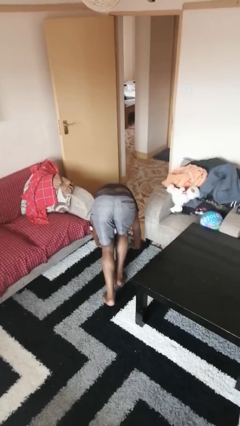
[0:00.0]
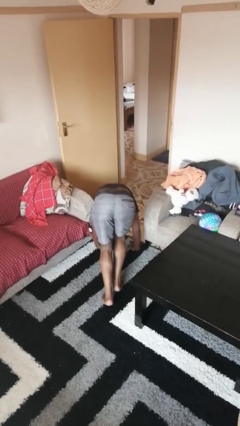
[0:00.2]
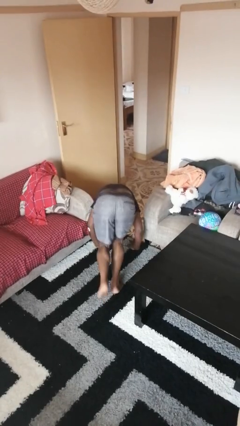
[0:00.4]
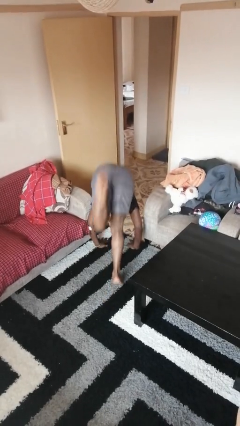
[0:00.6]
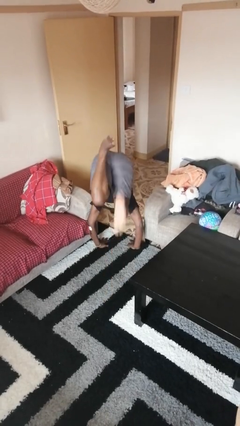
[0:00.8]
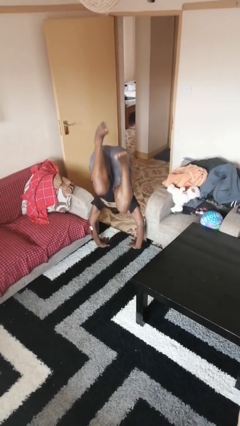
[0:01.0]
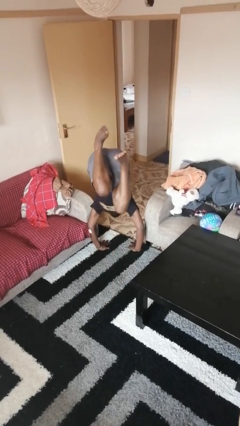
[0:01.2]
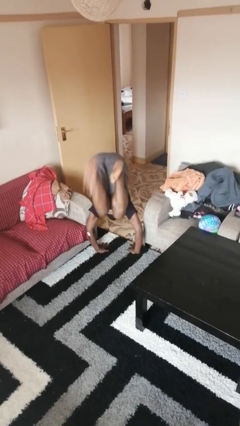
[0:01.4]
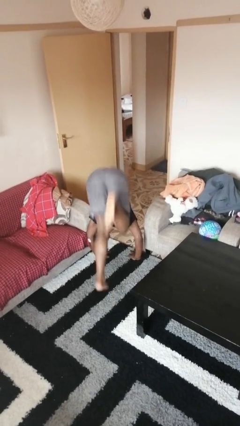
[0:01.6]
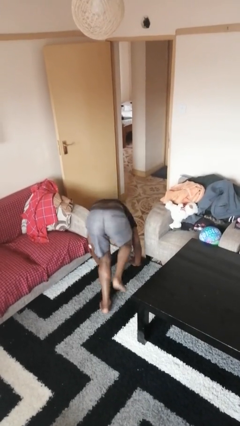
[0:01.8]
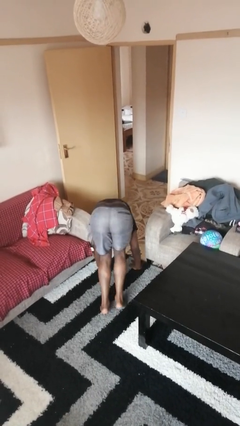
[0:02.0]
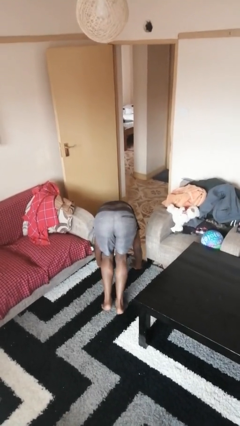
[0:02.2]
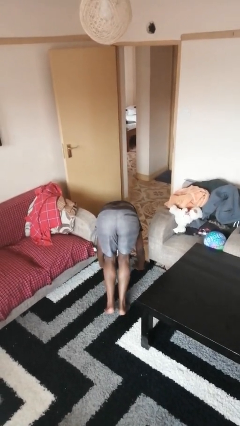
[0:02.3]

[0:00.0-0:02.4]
person handstand

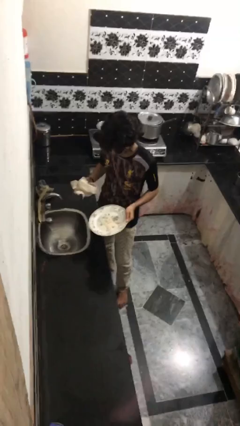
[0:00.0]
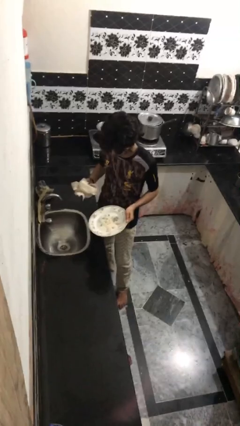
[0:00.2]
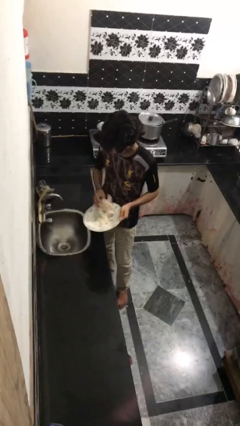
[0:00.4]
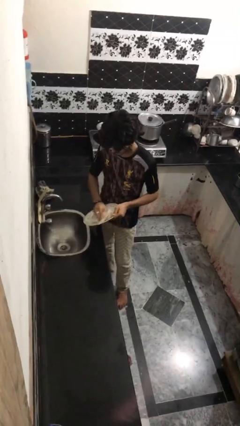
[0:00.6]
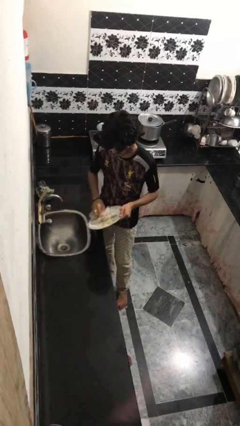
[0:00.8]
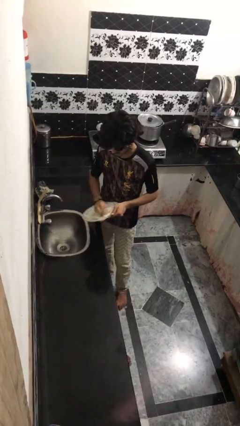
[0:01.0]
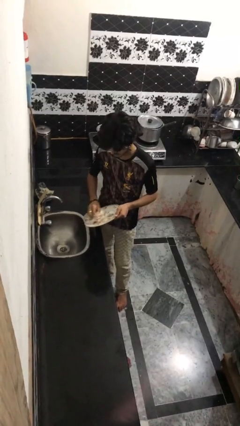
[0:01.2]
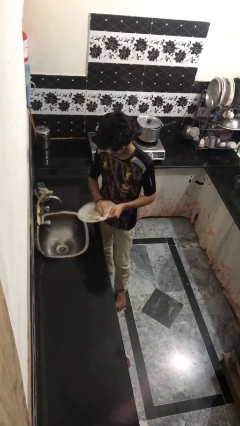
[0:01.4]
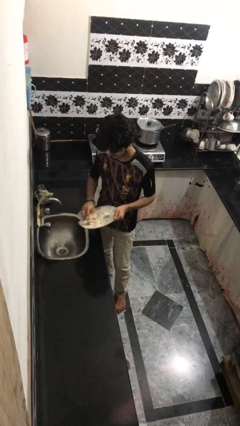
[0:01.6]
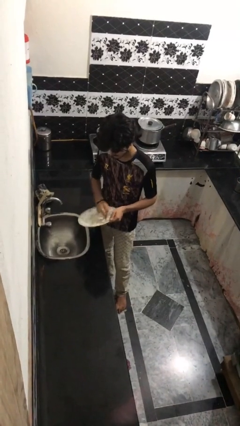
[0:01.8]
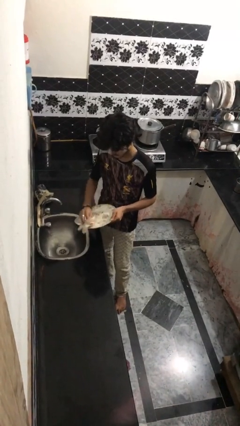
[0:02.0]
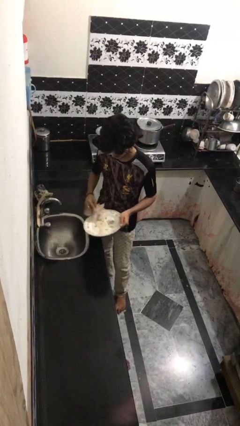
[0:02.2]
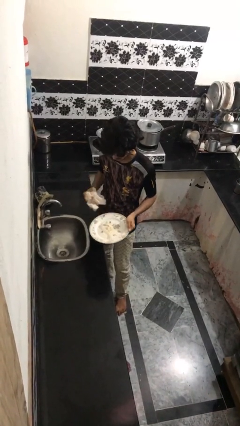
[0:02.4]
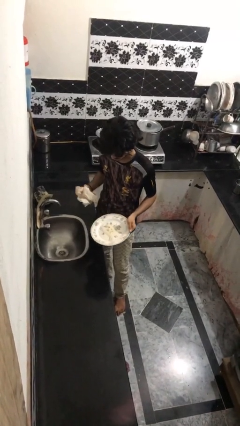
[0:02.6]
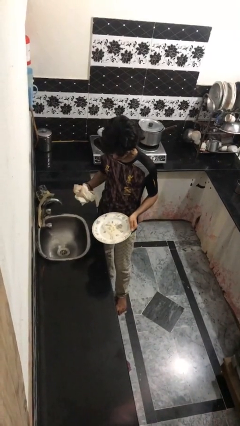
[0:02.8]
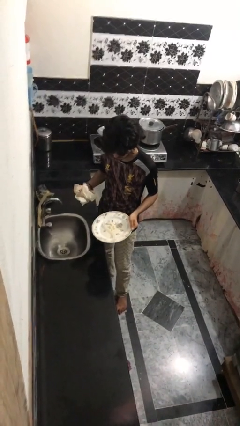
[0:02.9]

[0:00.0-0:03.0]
person dries dish

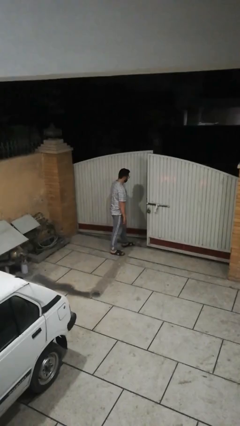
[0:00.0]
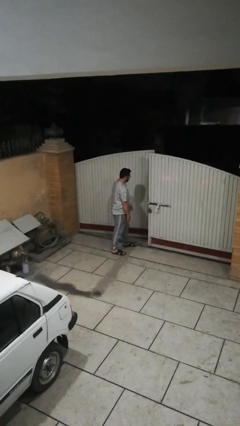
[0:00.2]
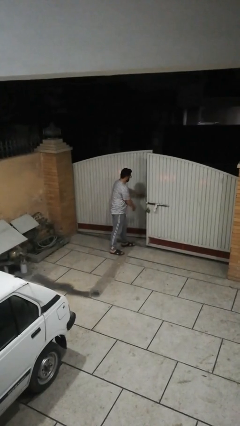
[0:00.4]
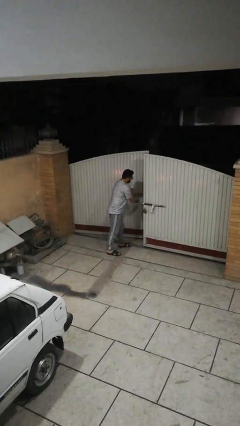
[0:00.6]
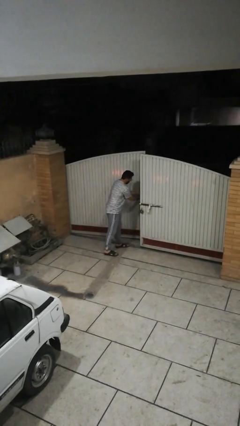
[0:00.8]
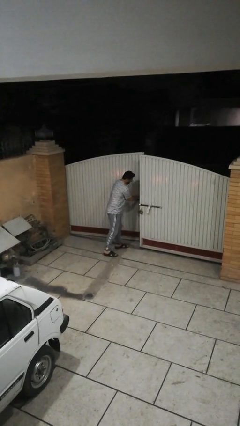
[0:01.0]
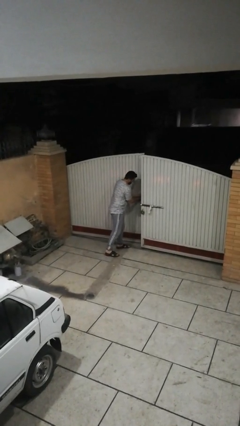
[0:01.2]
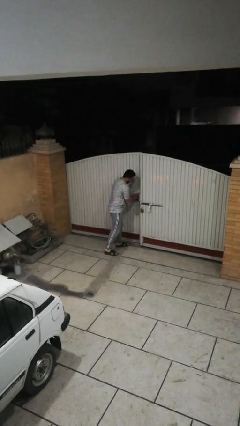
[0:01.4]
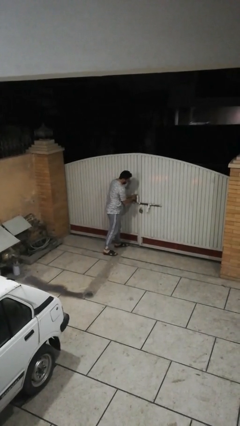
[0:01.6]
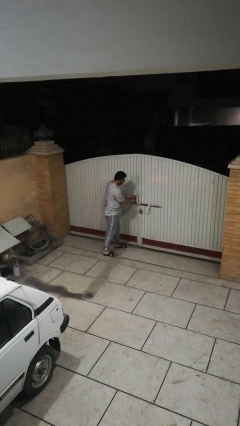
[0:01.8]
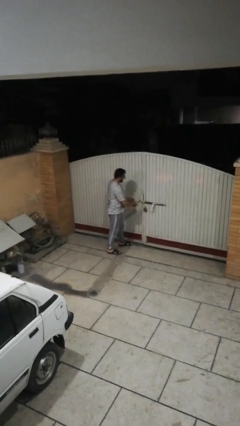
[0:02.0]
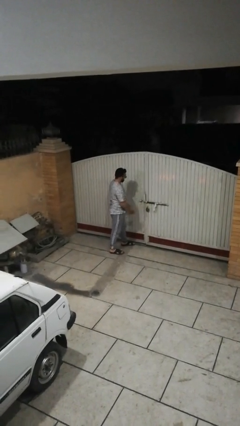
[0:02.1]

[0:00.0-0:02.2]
person closes facility door

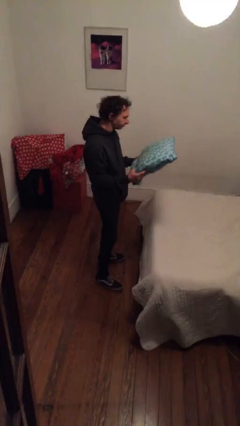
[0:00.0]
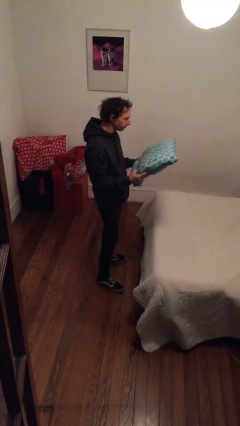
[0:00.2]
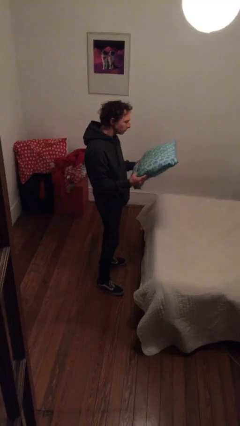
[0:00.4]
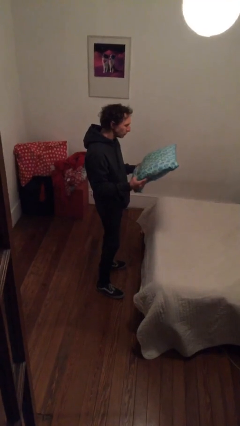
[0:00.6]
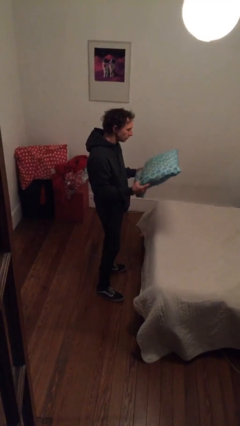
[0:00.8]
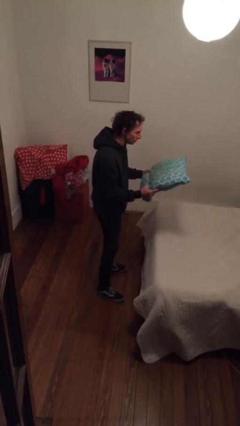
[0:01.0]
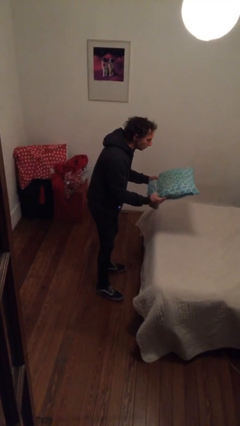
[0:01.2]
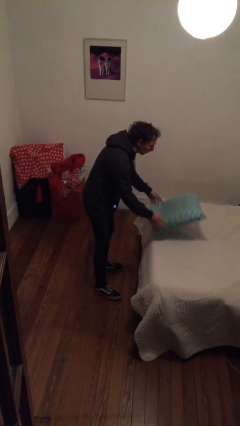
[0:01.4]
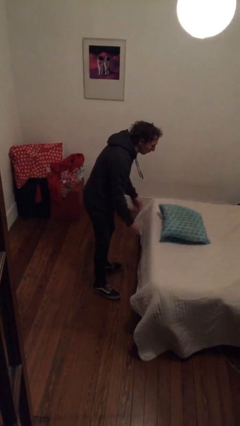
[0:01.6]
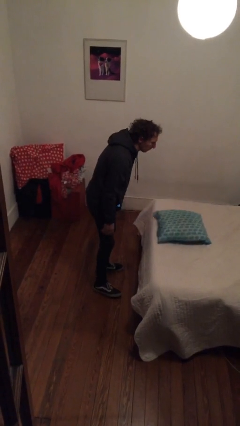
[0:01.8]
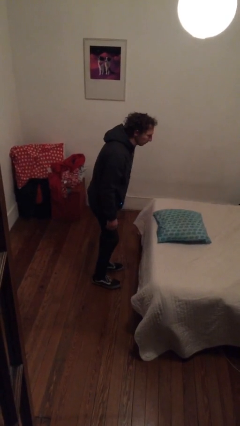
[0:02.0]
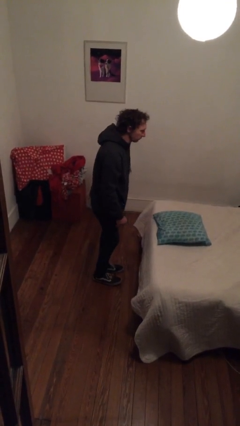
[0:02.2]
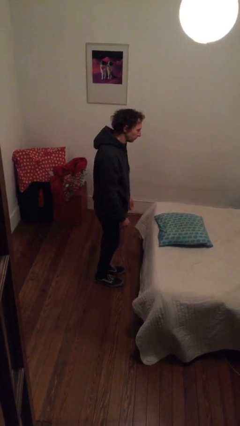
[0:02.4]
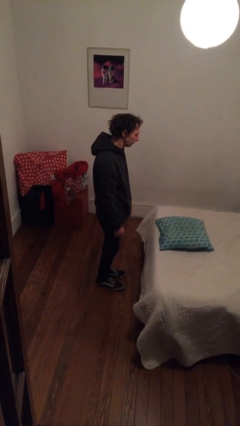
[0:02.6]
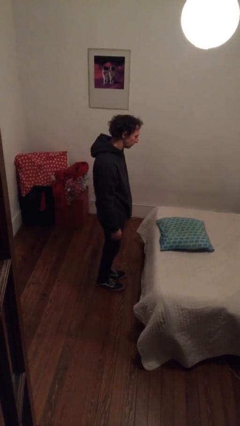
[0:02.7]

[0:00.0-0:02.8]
person puts down object on bed

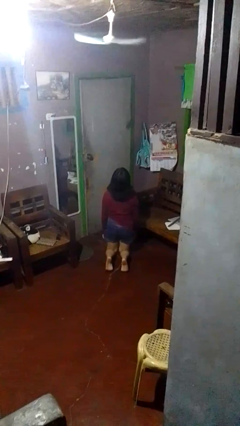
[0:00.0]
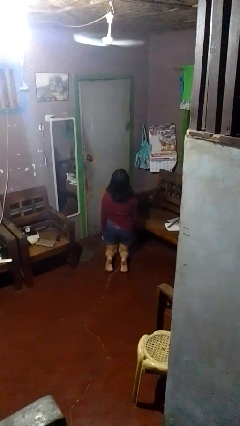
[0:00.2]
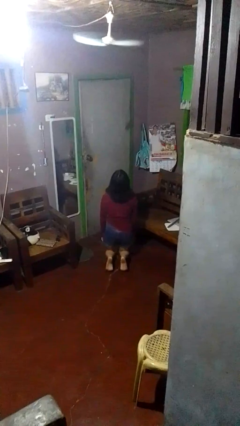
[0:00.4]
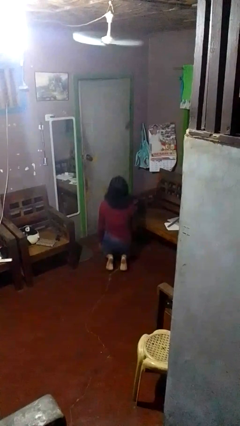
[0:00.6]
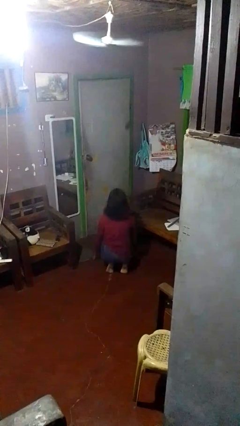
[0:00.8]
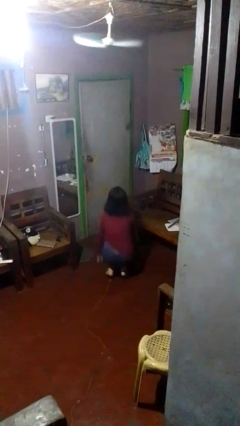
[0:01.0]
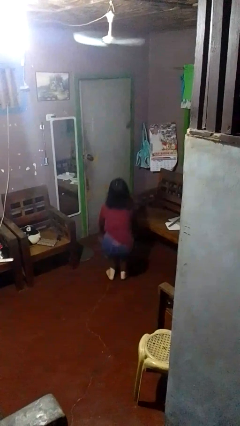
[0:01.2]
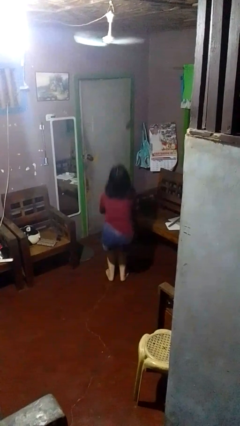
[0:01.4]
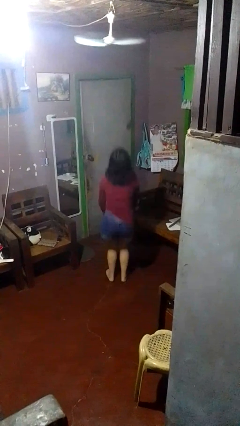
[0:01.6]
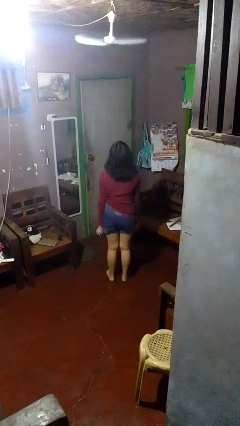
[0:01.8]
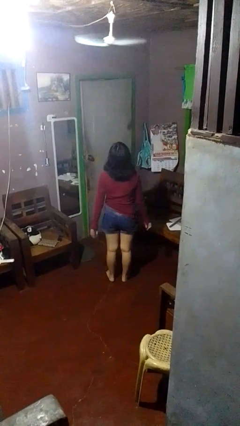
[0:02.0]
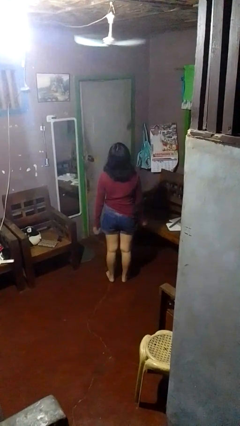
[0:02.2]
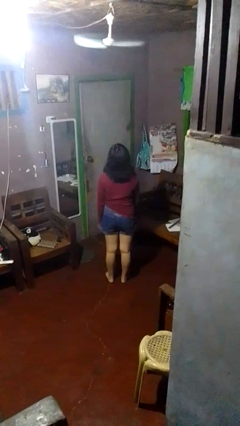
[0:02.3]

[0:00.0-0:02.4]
person stands up from floor

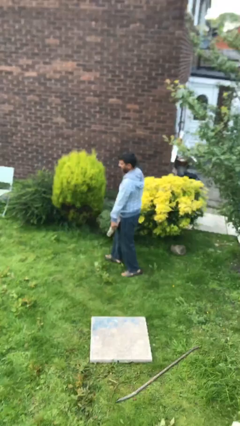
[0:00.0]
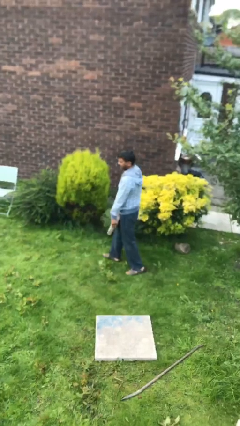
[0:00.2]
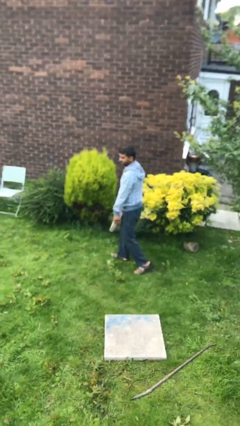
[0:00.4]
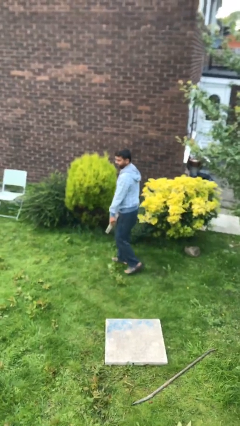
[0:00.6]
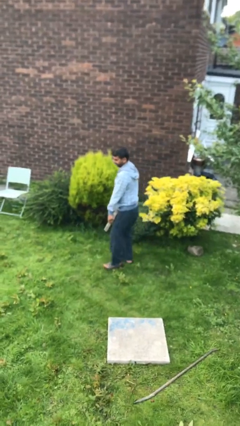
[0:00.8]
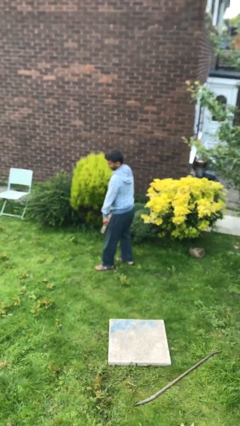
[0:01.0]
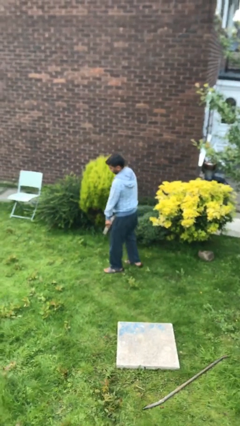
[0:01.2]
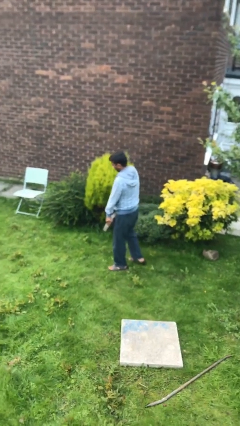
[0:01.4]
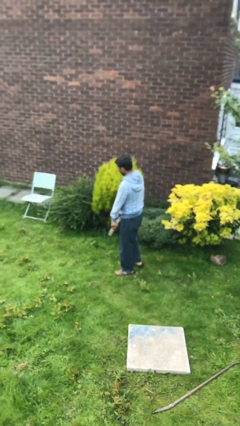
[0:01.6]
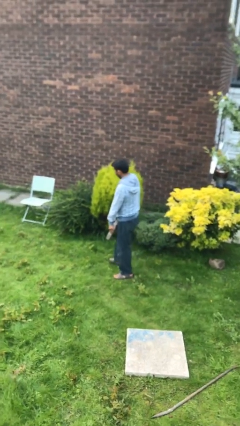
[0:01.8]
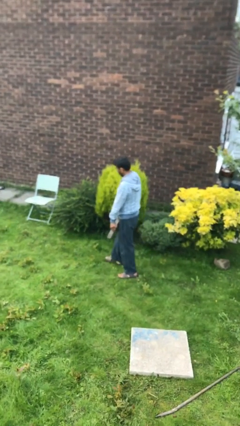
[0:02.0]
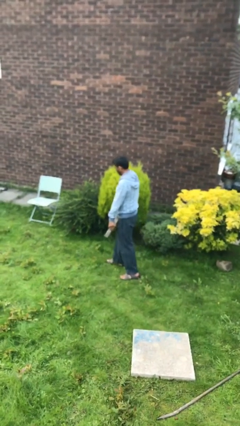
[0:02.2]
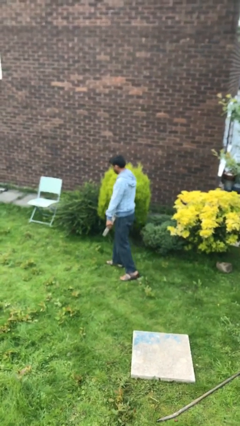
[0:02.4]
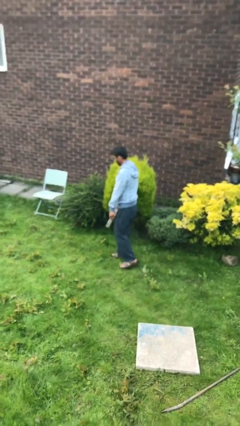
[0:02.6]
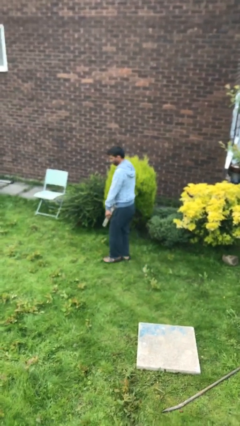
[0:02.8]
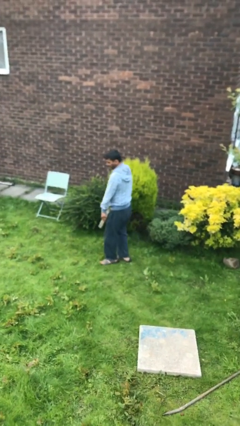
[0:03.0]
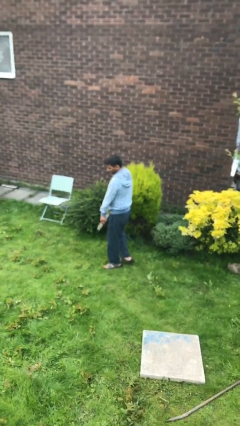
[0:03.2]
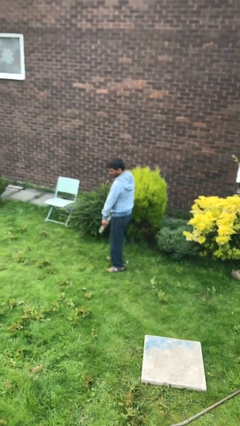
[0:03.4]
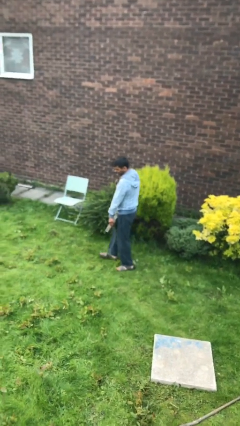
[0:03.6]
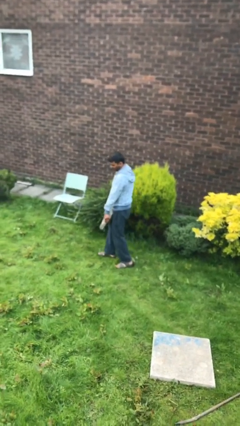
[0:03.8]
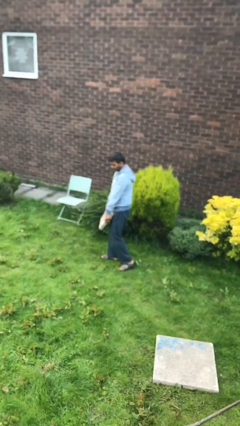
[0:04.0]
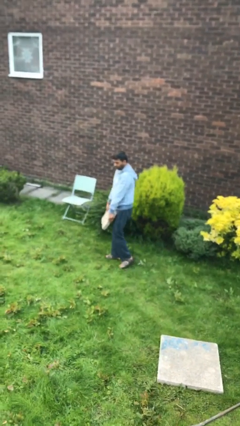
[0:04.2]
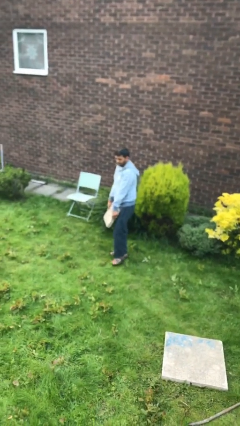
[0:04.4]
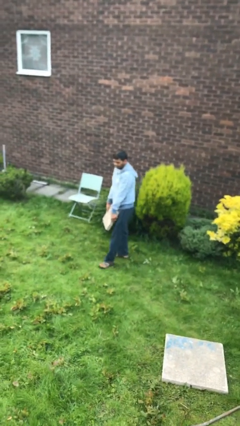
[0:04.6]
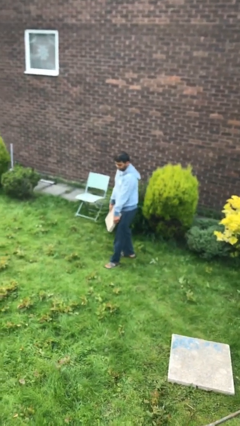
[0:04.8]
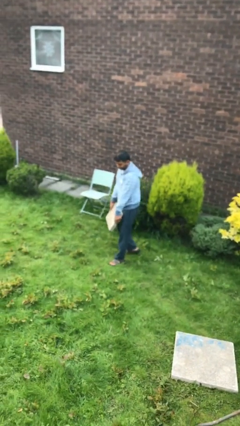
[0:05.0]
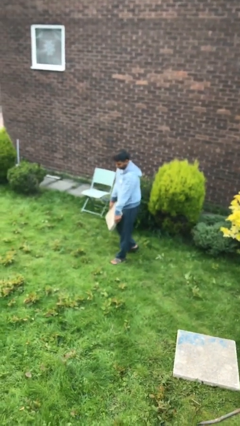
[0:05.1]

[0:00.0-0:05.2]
person carries heavy object
